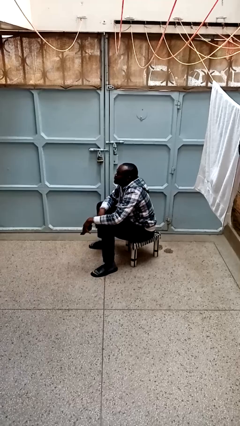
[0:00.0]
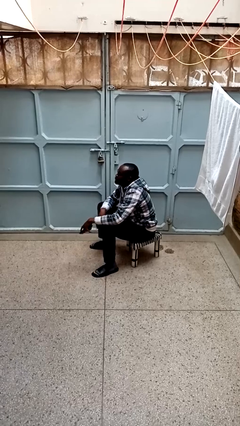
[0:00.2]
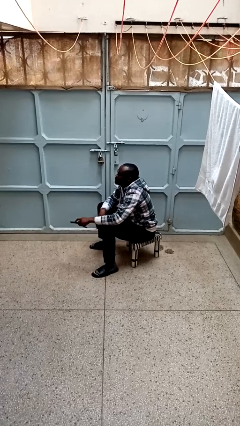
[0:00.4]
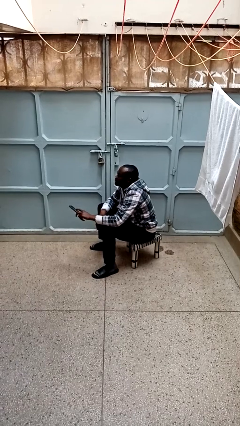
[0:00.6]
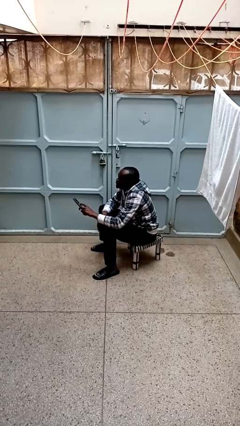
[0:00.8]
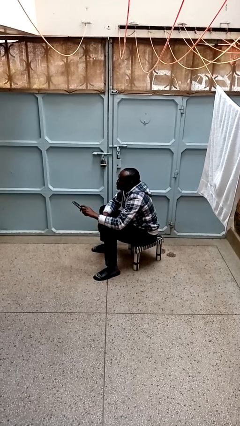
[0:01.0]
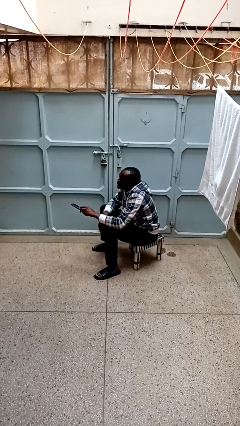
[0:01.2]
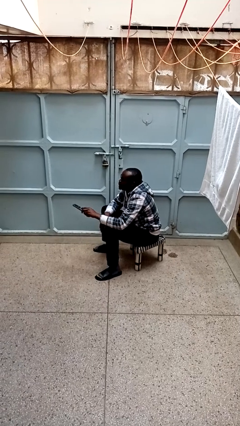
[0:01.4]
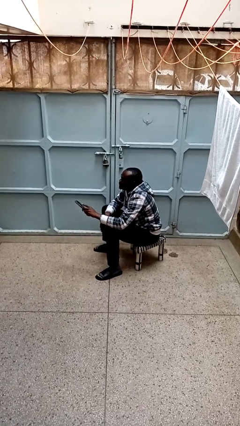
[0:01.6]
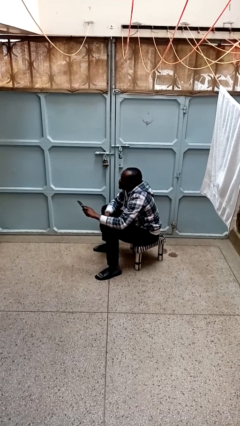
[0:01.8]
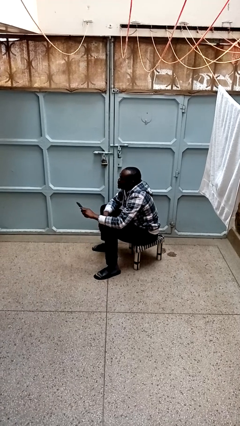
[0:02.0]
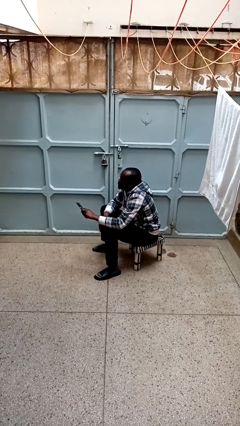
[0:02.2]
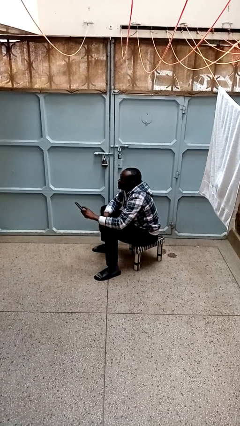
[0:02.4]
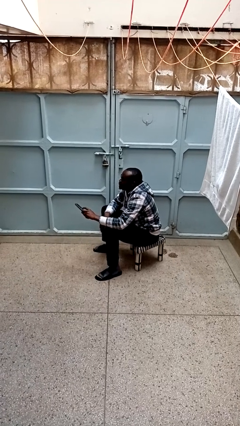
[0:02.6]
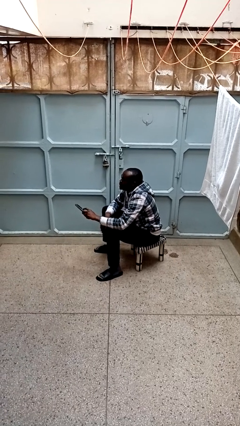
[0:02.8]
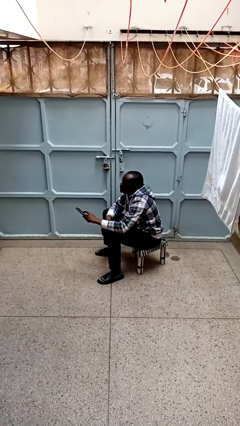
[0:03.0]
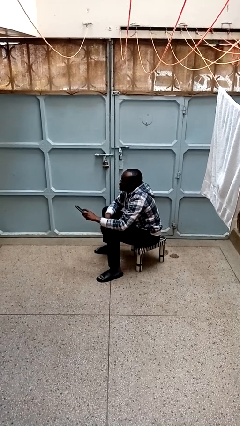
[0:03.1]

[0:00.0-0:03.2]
person uses television remote

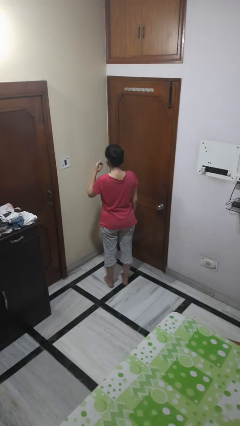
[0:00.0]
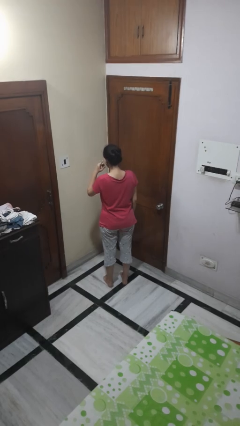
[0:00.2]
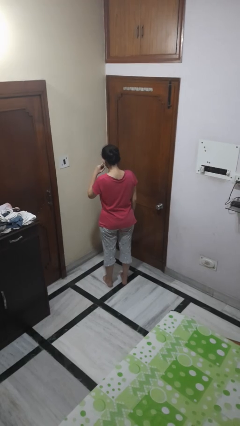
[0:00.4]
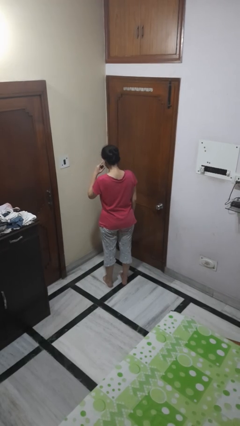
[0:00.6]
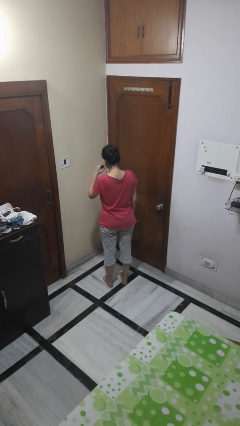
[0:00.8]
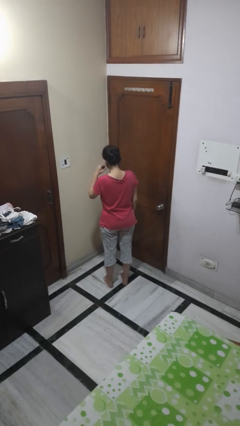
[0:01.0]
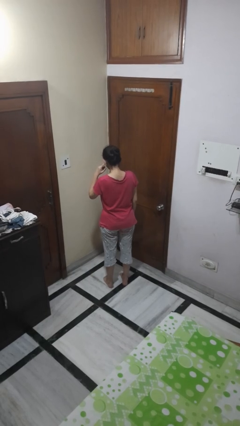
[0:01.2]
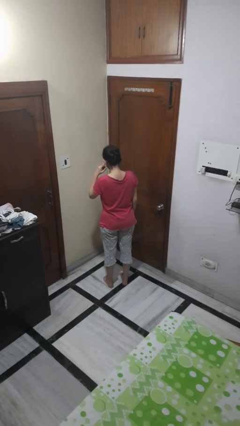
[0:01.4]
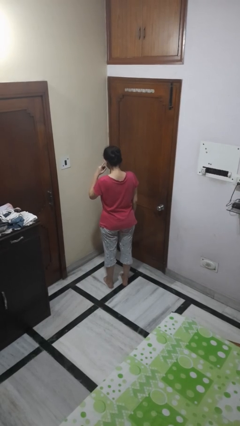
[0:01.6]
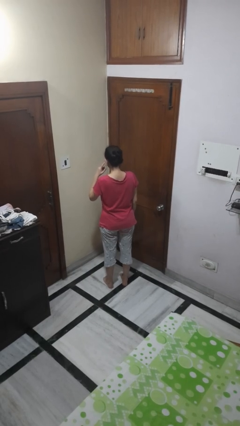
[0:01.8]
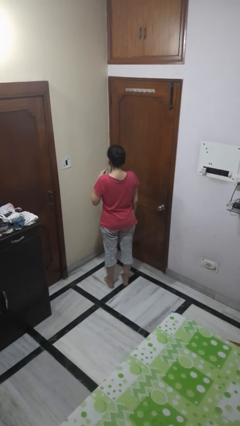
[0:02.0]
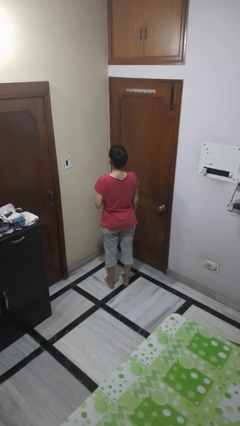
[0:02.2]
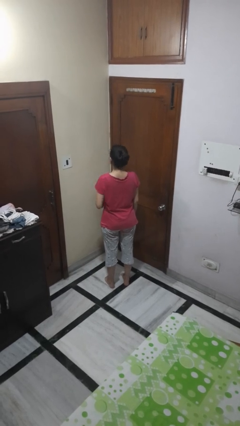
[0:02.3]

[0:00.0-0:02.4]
person gestures listen closely

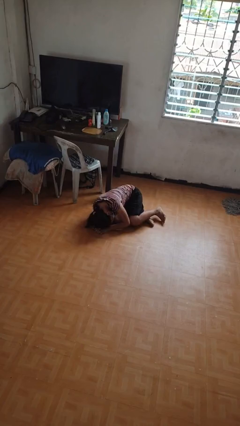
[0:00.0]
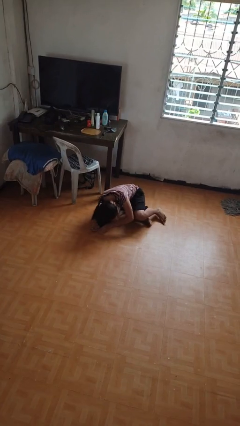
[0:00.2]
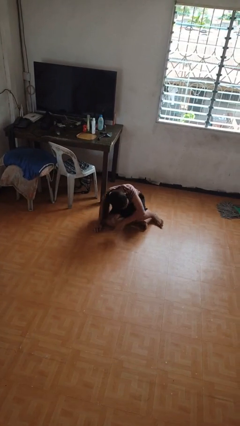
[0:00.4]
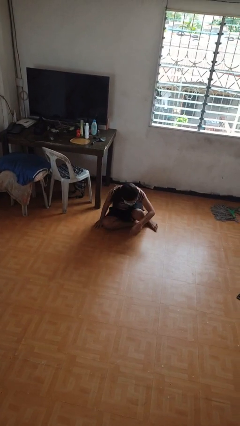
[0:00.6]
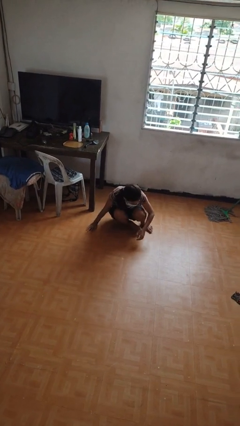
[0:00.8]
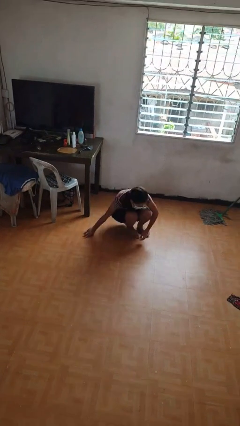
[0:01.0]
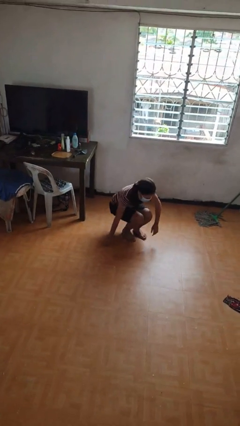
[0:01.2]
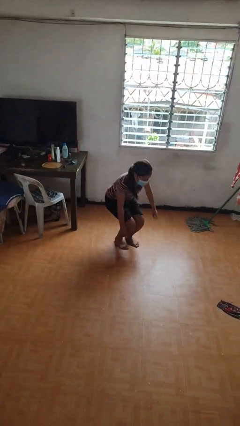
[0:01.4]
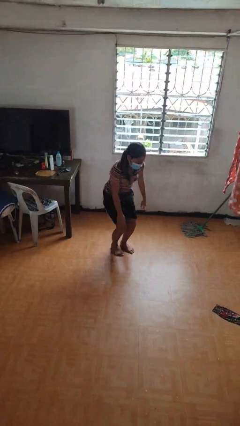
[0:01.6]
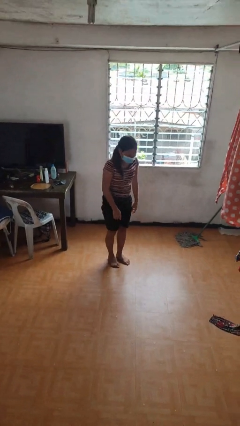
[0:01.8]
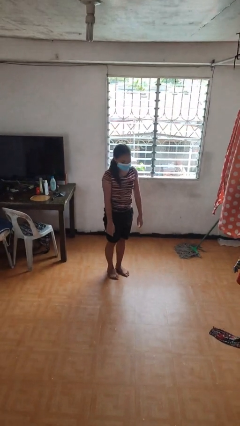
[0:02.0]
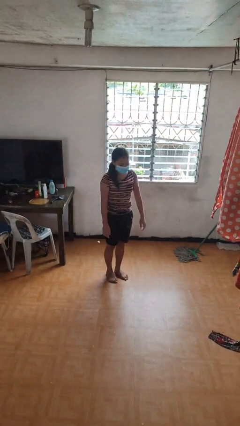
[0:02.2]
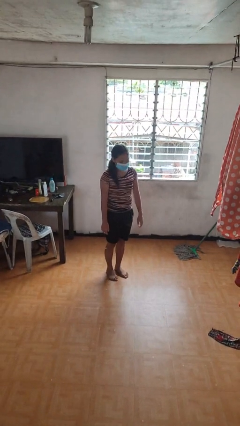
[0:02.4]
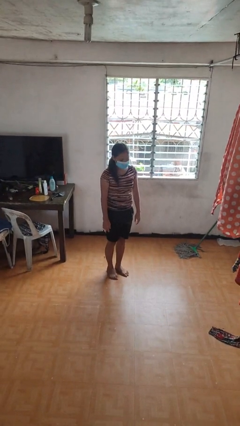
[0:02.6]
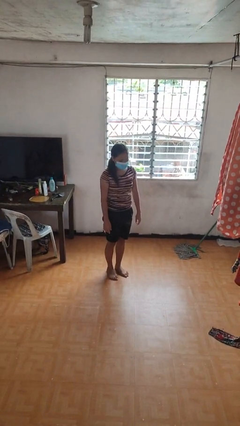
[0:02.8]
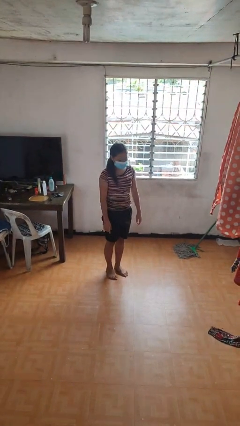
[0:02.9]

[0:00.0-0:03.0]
person stands up from floor

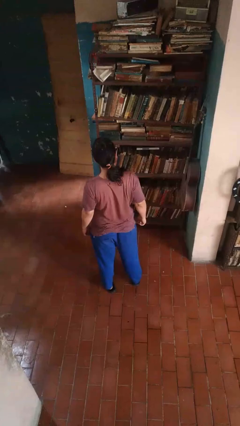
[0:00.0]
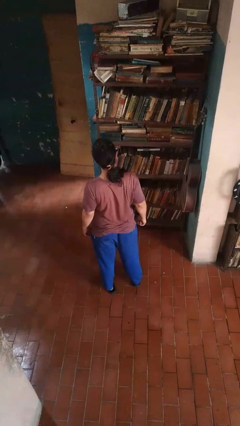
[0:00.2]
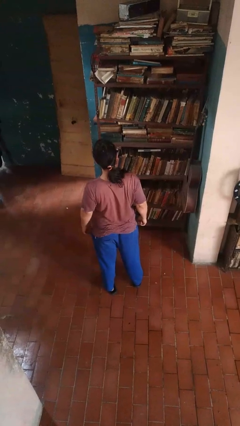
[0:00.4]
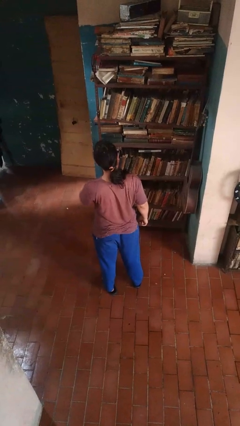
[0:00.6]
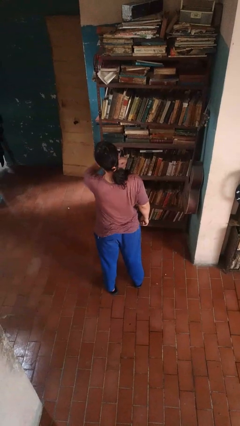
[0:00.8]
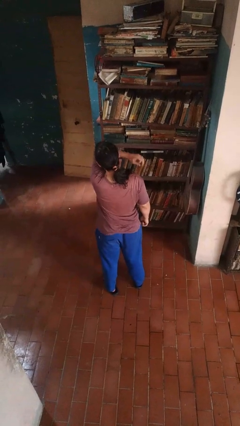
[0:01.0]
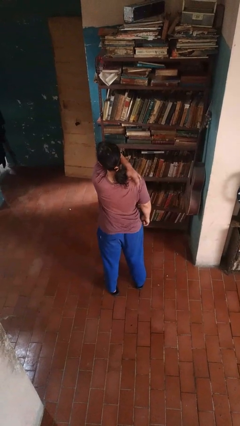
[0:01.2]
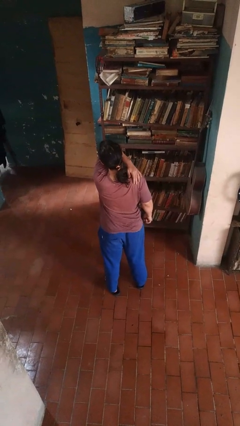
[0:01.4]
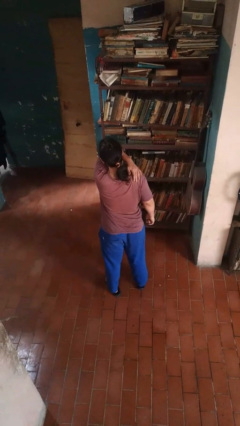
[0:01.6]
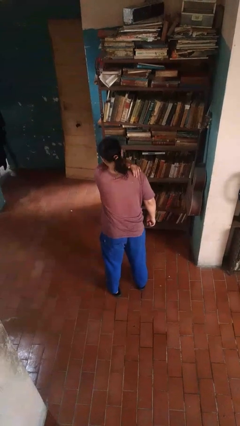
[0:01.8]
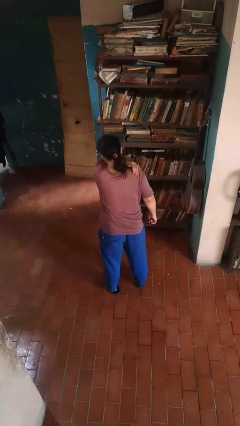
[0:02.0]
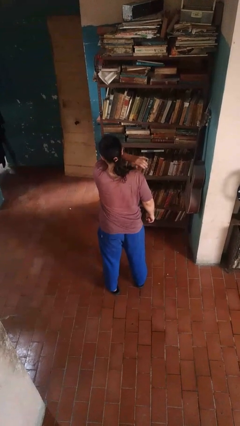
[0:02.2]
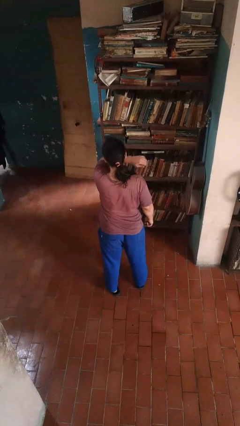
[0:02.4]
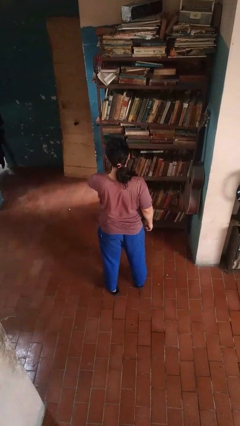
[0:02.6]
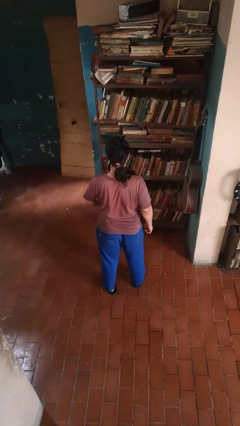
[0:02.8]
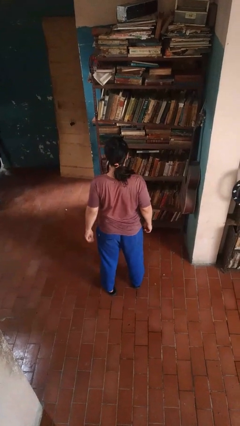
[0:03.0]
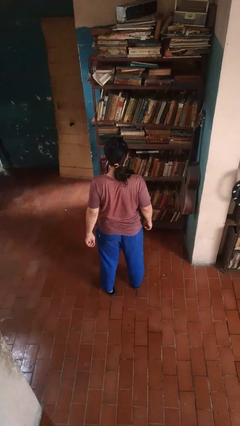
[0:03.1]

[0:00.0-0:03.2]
person sneezes into arm

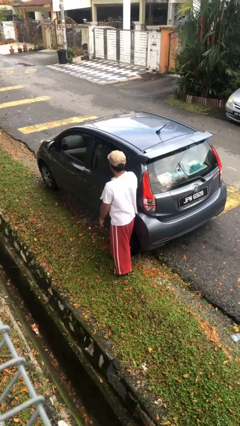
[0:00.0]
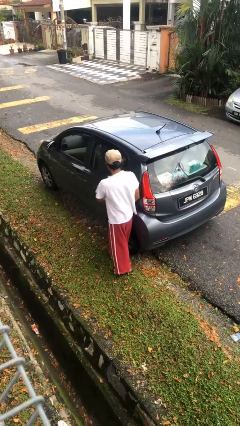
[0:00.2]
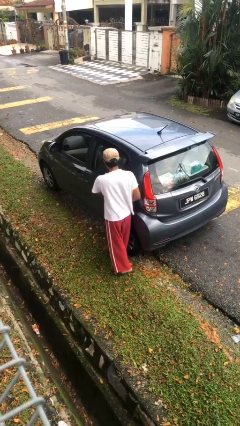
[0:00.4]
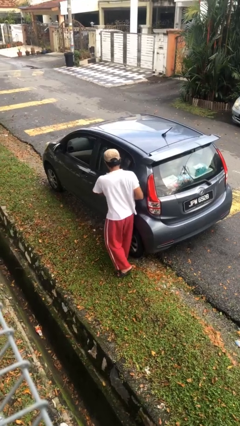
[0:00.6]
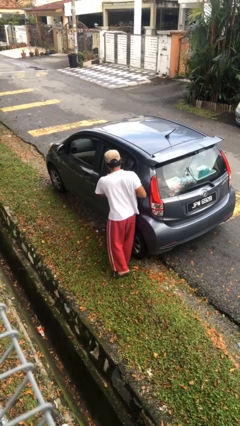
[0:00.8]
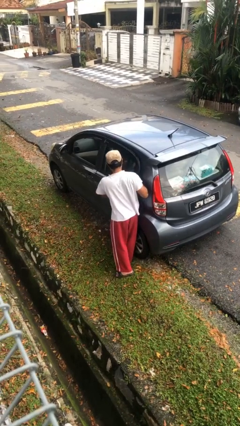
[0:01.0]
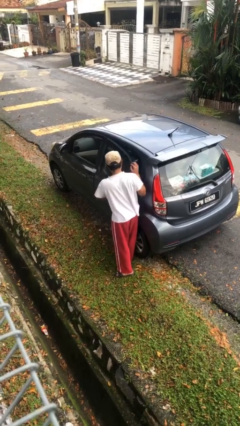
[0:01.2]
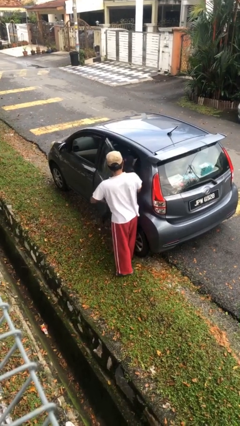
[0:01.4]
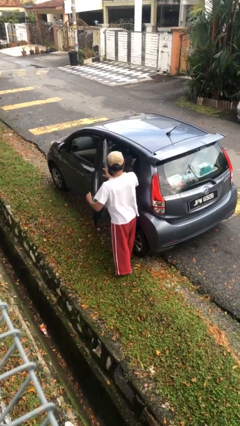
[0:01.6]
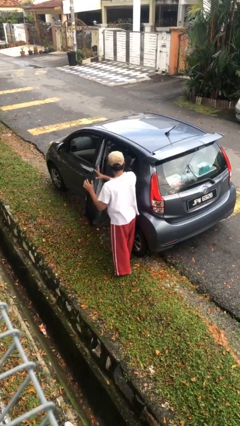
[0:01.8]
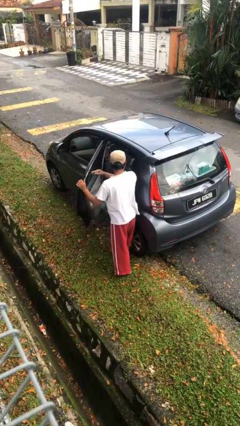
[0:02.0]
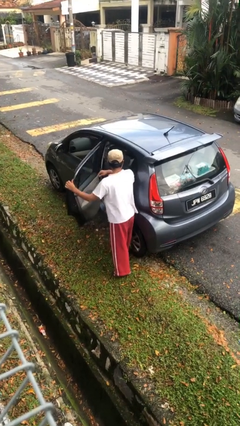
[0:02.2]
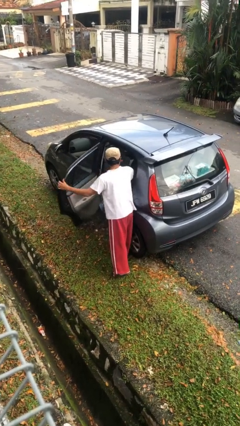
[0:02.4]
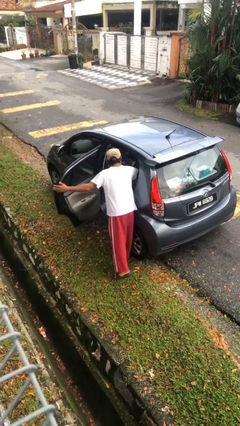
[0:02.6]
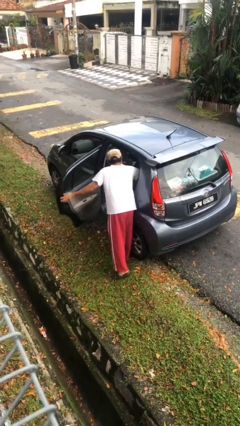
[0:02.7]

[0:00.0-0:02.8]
person opens car door

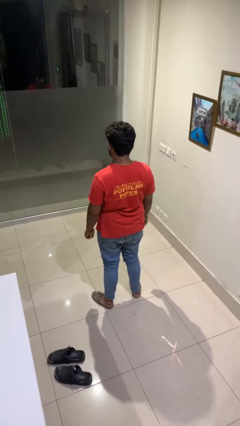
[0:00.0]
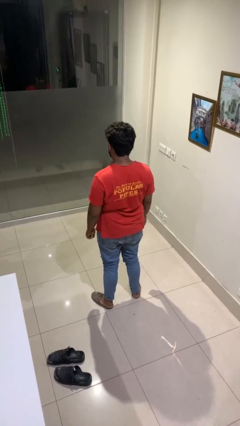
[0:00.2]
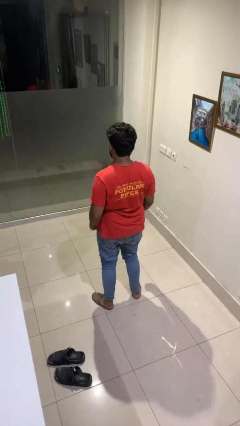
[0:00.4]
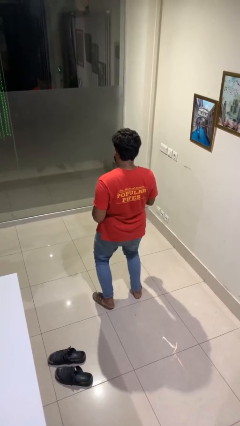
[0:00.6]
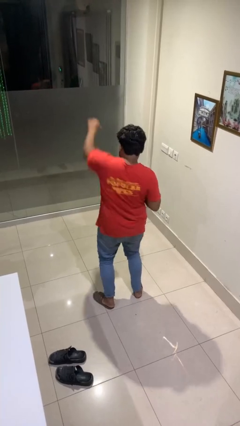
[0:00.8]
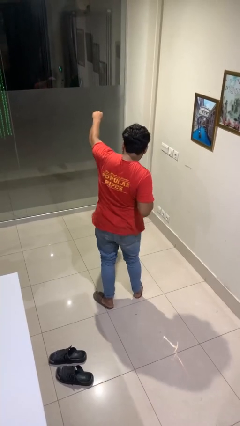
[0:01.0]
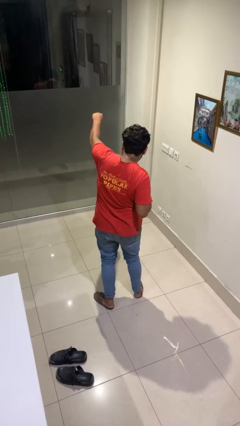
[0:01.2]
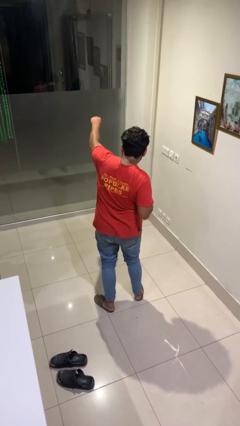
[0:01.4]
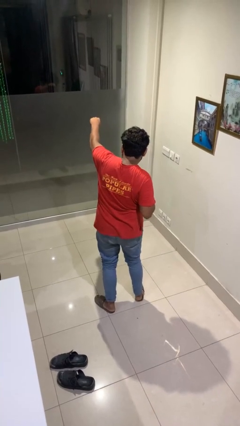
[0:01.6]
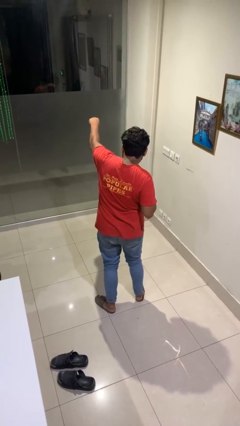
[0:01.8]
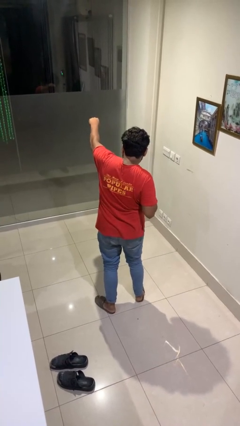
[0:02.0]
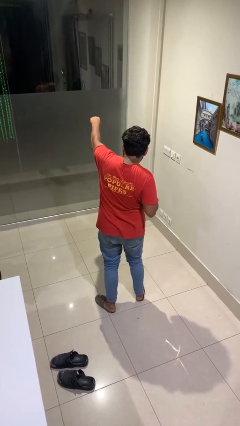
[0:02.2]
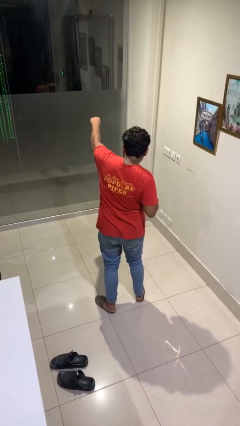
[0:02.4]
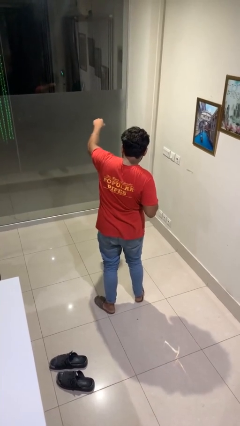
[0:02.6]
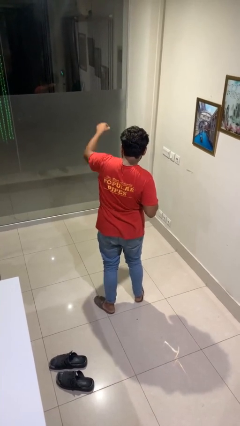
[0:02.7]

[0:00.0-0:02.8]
person punches
